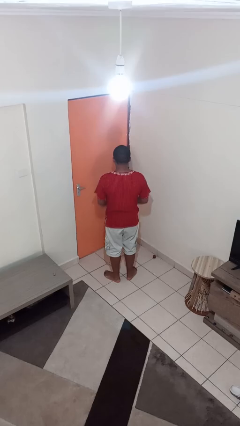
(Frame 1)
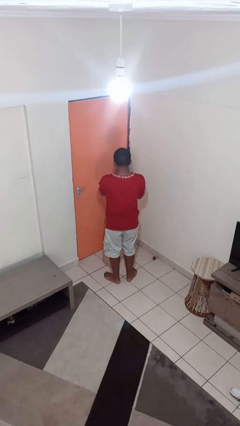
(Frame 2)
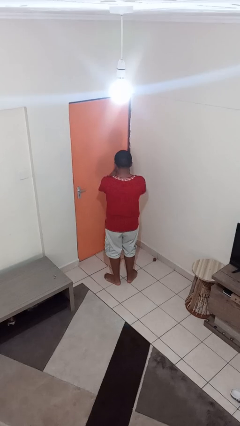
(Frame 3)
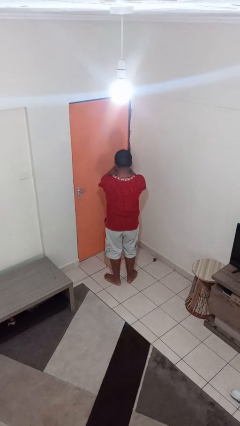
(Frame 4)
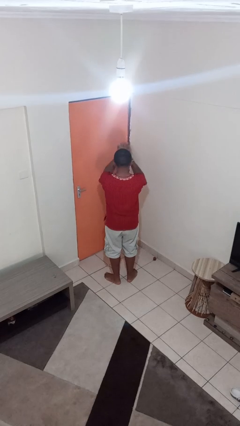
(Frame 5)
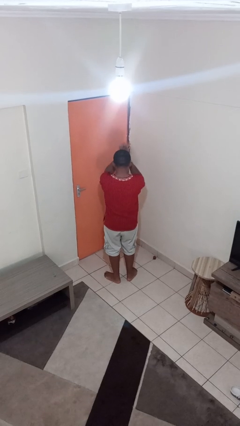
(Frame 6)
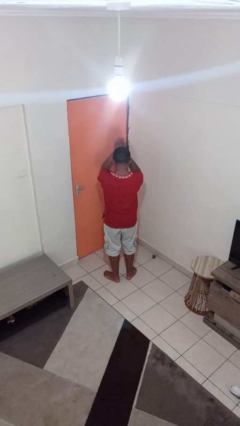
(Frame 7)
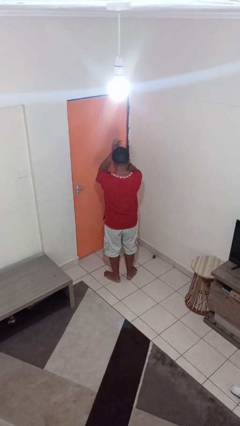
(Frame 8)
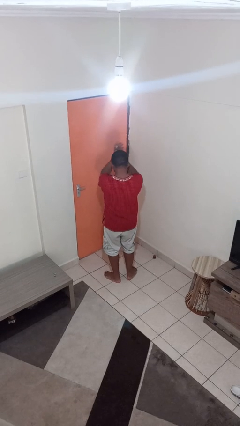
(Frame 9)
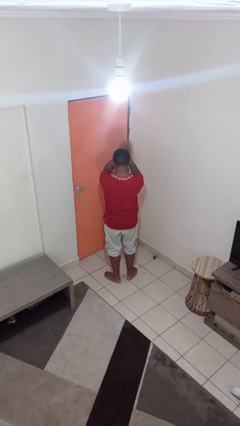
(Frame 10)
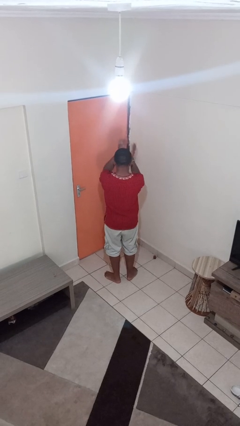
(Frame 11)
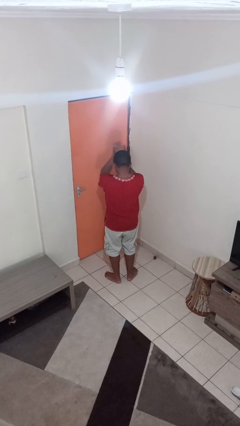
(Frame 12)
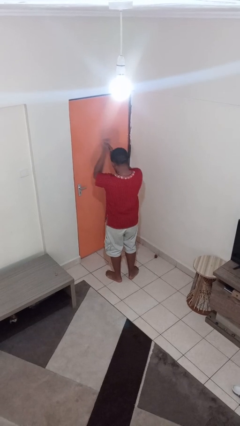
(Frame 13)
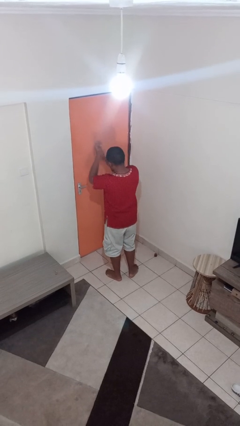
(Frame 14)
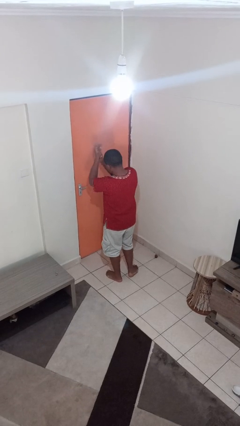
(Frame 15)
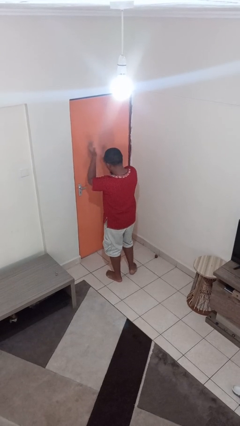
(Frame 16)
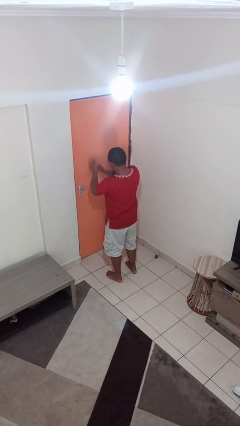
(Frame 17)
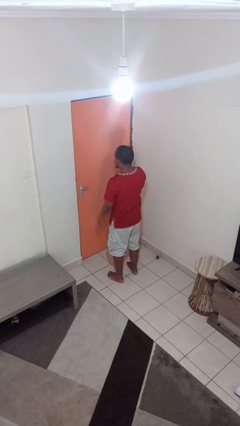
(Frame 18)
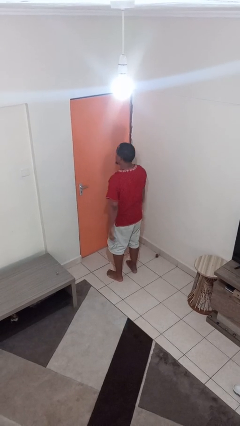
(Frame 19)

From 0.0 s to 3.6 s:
person claps hands

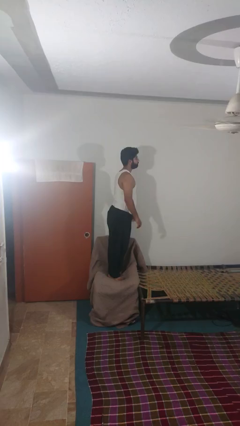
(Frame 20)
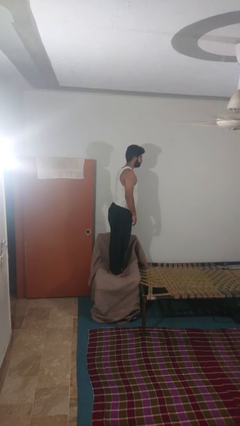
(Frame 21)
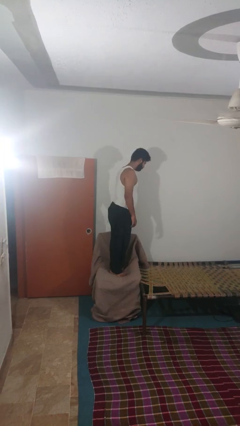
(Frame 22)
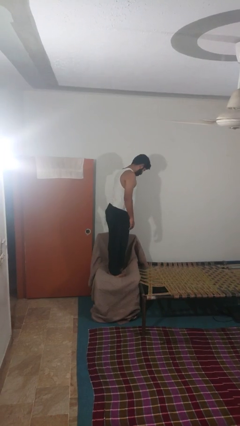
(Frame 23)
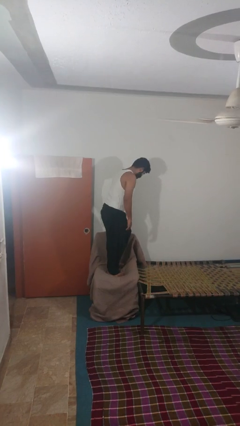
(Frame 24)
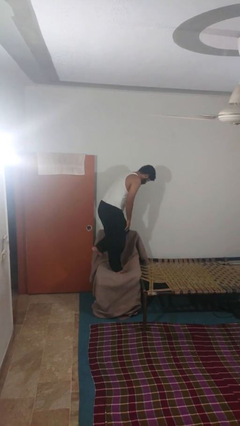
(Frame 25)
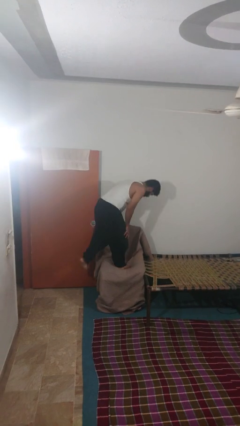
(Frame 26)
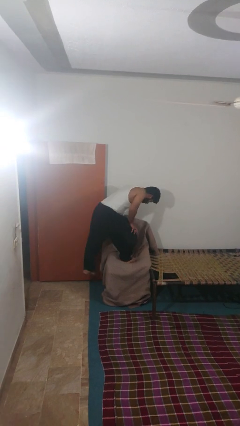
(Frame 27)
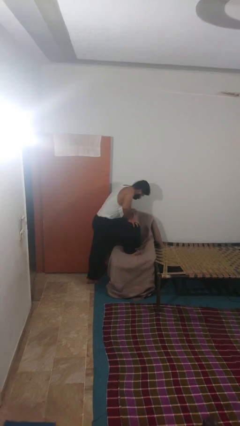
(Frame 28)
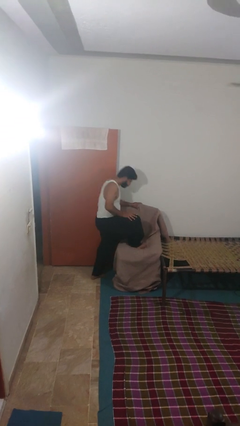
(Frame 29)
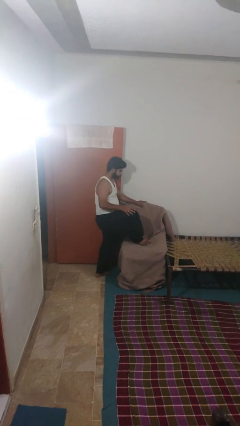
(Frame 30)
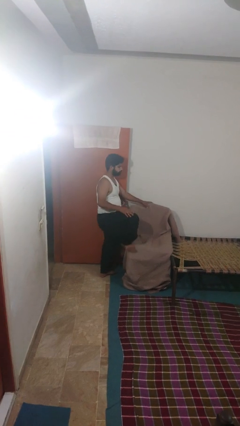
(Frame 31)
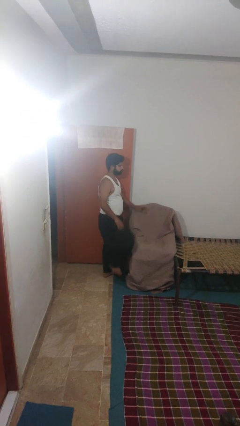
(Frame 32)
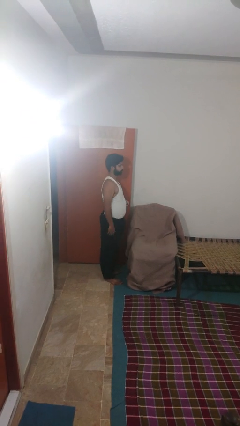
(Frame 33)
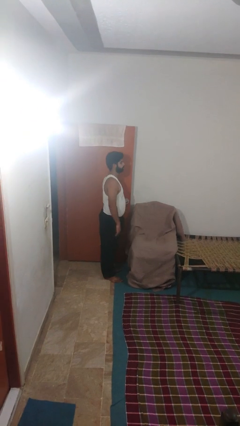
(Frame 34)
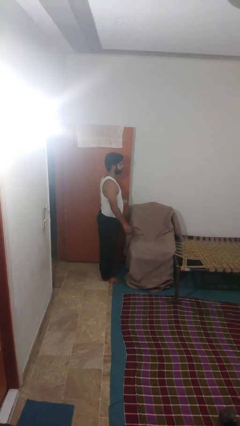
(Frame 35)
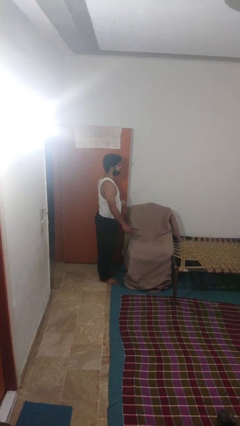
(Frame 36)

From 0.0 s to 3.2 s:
person climbs off couch

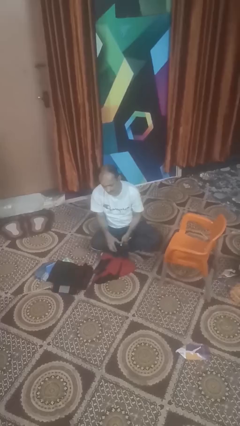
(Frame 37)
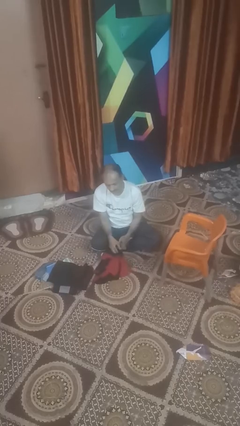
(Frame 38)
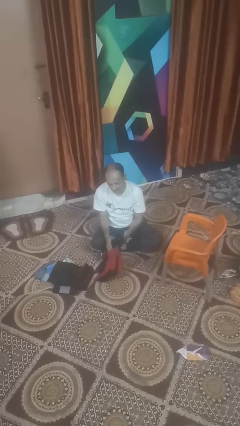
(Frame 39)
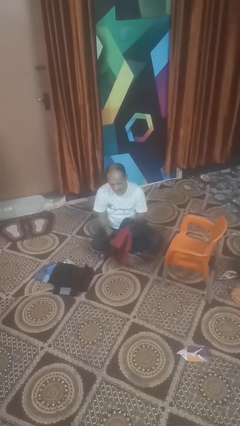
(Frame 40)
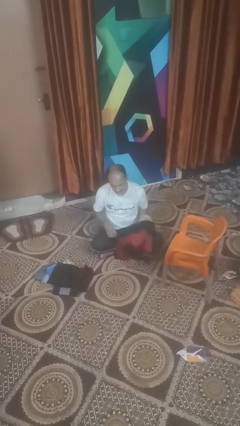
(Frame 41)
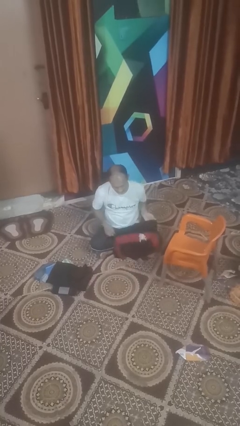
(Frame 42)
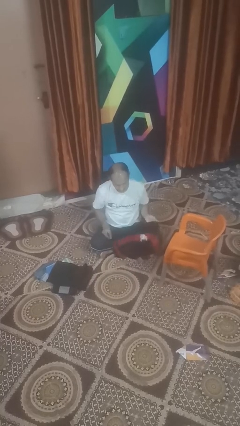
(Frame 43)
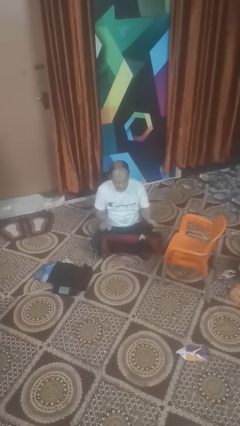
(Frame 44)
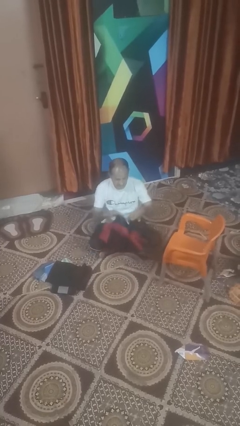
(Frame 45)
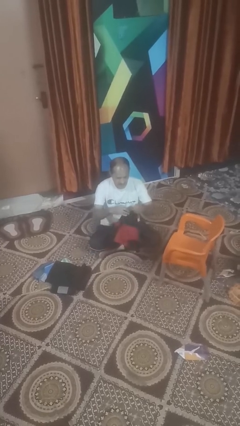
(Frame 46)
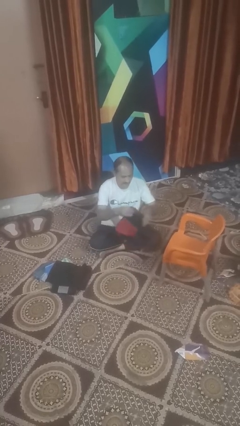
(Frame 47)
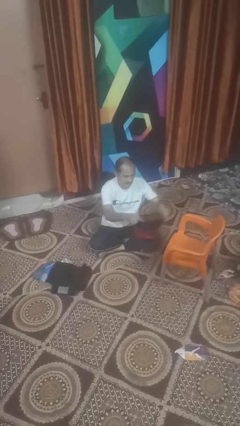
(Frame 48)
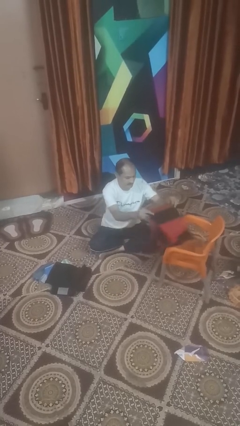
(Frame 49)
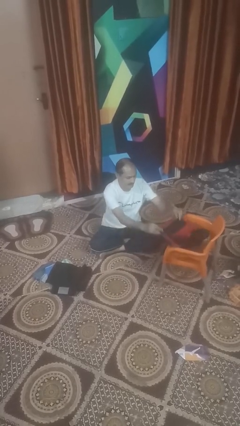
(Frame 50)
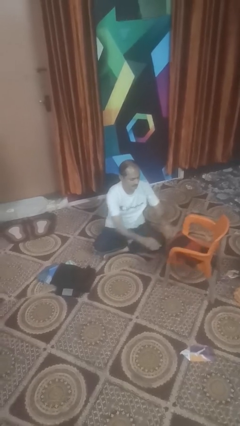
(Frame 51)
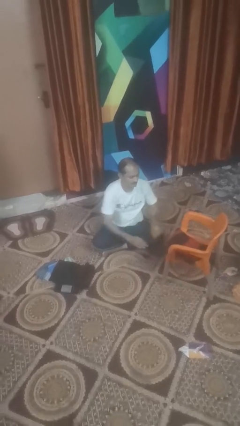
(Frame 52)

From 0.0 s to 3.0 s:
person folds shirt

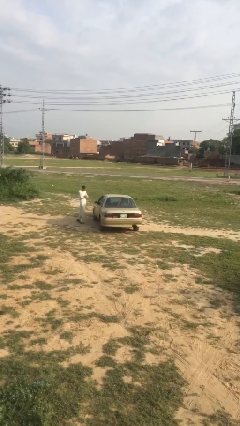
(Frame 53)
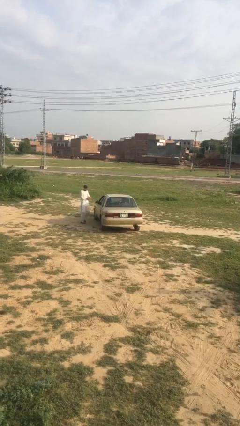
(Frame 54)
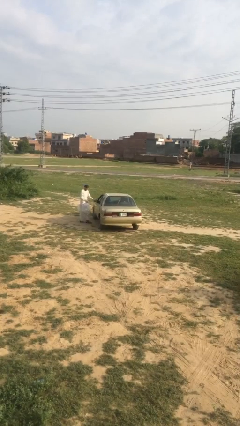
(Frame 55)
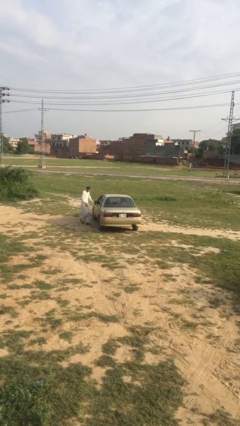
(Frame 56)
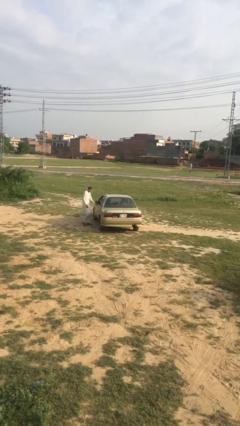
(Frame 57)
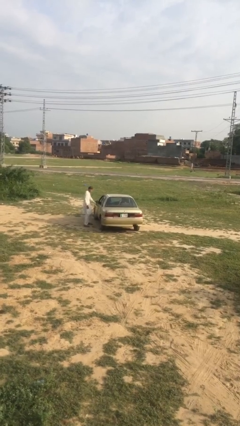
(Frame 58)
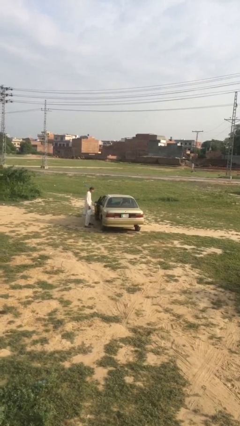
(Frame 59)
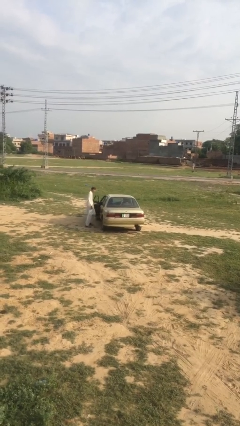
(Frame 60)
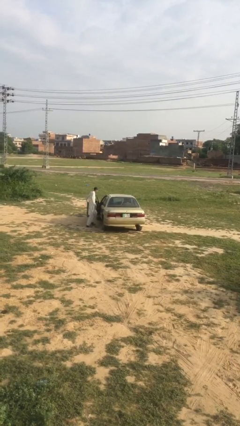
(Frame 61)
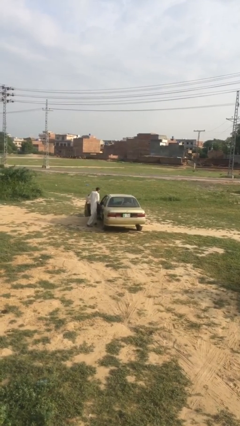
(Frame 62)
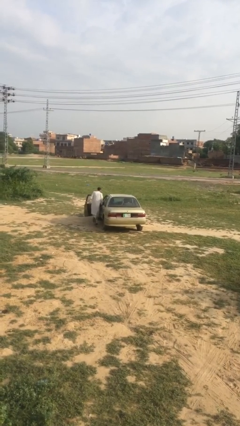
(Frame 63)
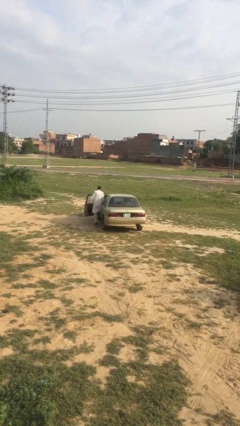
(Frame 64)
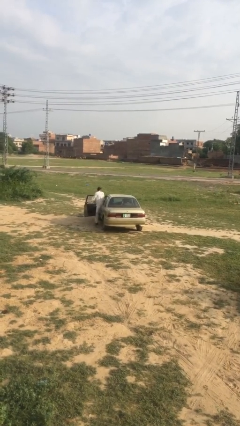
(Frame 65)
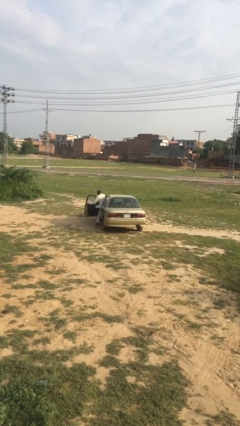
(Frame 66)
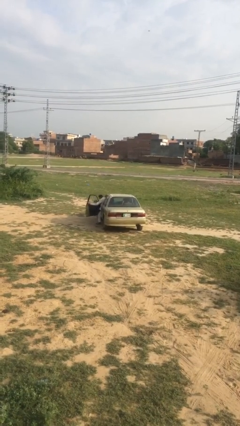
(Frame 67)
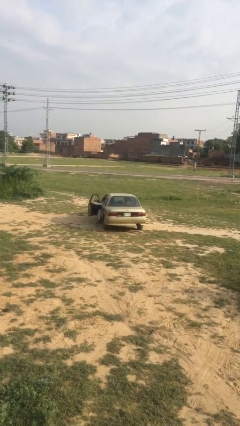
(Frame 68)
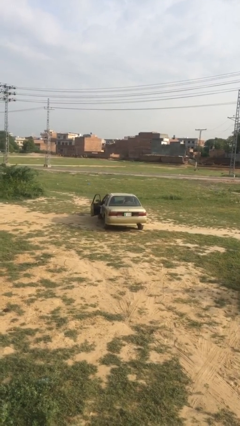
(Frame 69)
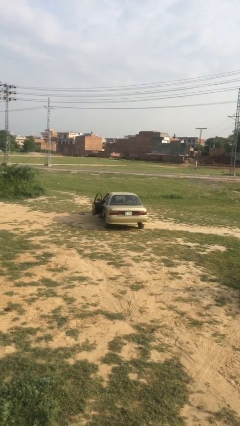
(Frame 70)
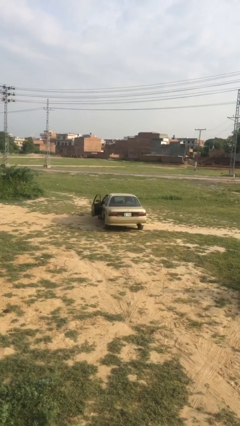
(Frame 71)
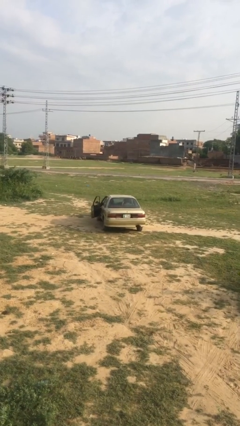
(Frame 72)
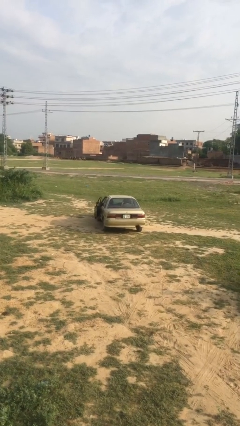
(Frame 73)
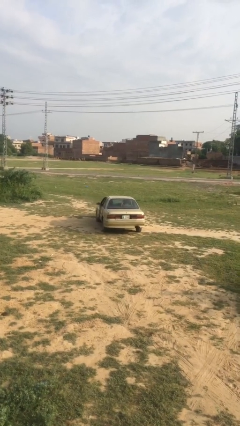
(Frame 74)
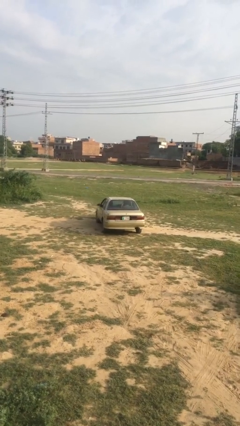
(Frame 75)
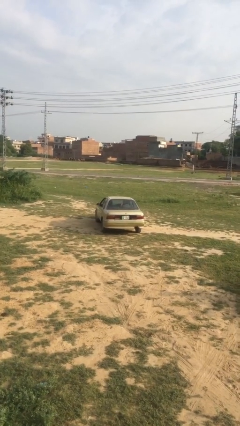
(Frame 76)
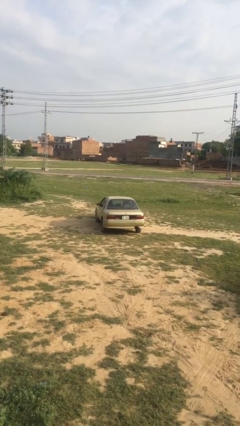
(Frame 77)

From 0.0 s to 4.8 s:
car picks up person

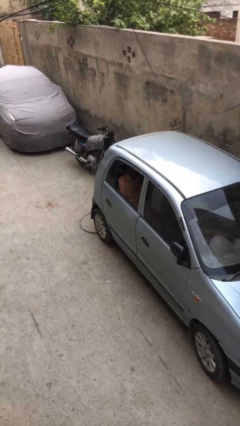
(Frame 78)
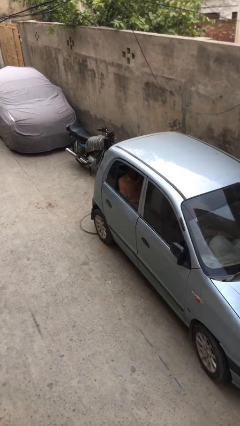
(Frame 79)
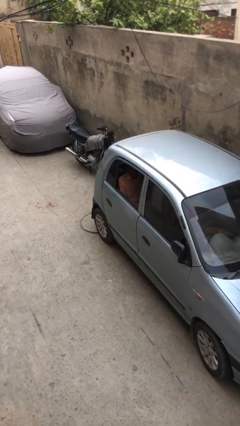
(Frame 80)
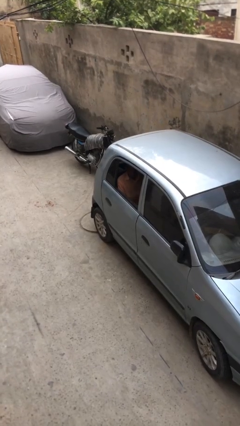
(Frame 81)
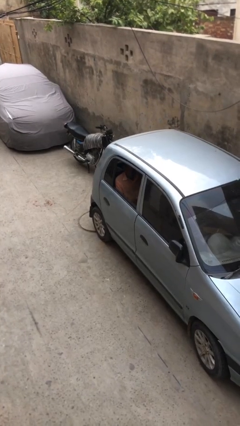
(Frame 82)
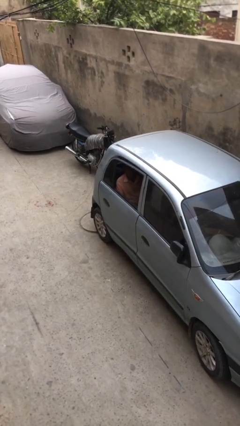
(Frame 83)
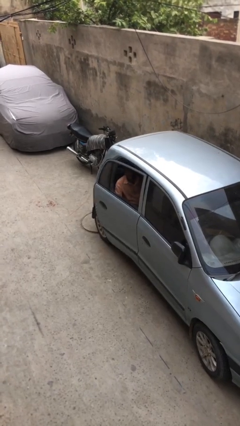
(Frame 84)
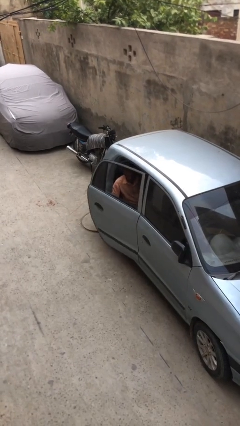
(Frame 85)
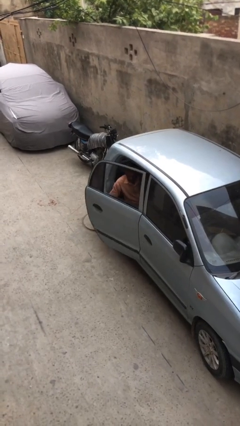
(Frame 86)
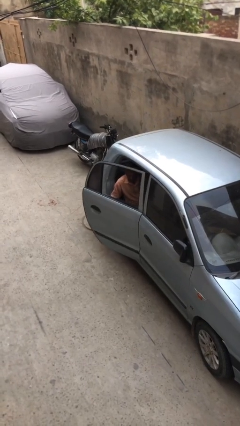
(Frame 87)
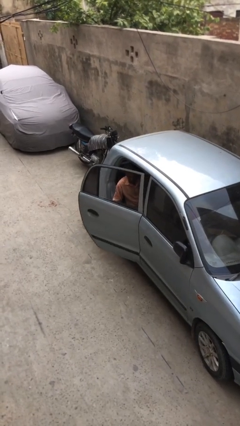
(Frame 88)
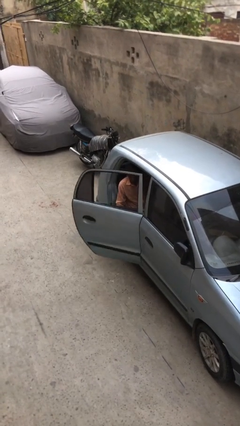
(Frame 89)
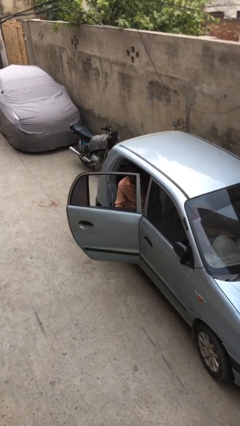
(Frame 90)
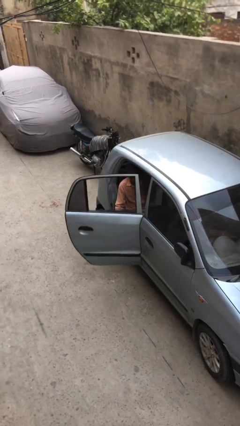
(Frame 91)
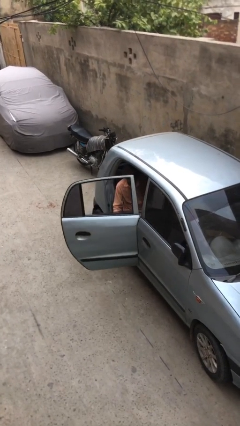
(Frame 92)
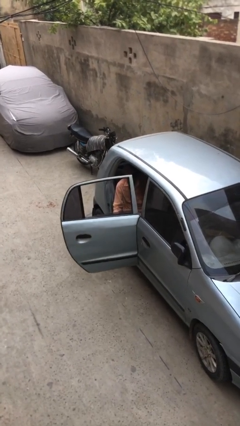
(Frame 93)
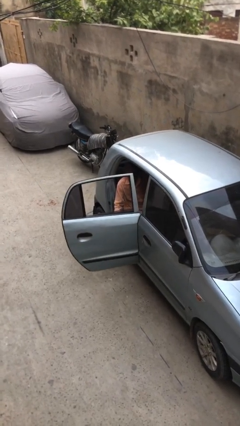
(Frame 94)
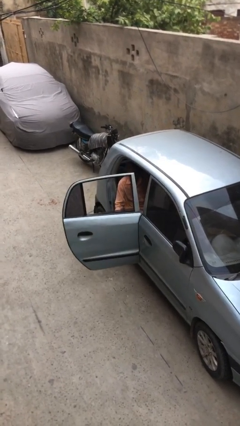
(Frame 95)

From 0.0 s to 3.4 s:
person opens car door
